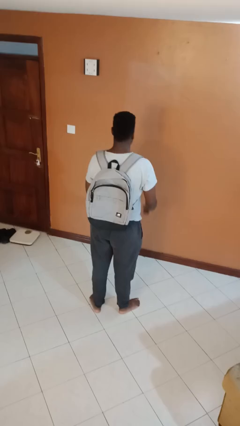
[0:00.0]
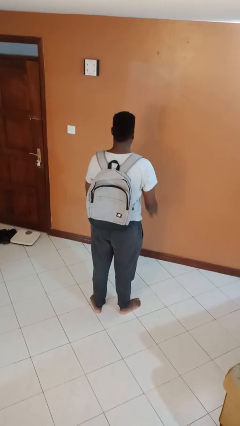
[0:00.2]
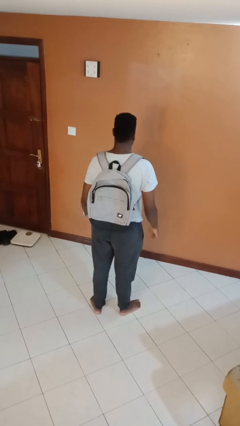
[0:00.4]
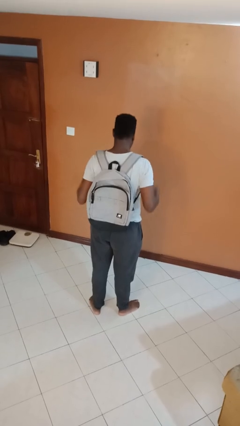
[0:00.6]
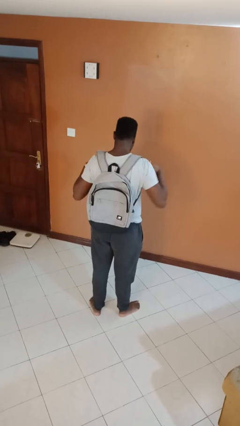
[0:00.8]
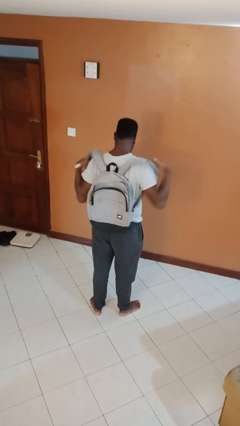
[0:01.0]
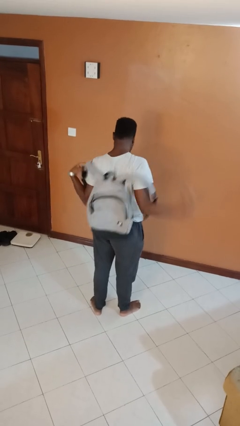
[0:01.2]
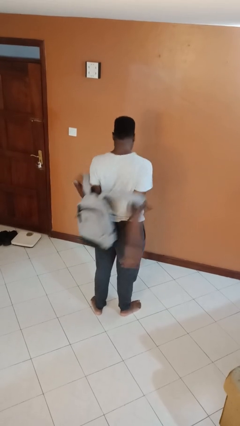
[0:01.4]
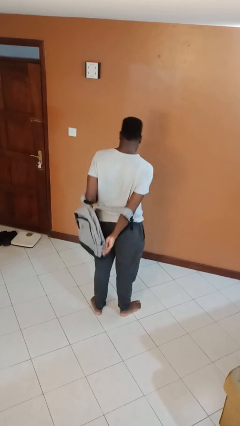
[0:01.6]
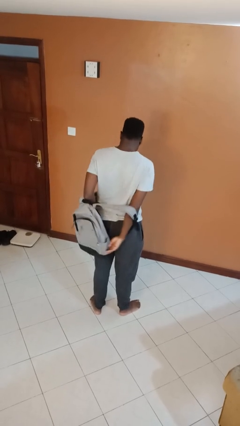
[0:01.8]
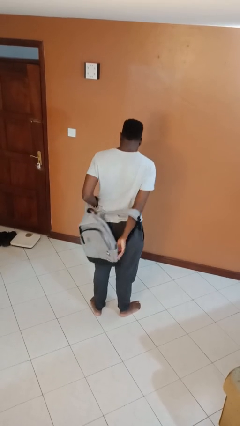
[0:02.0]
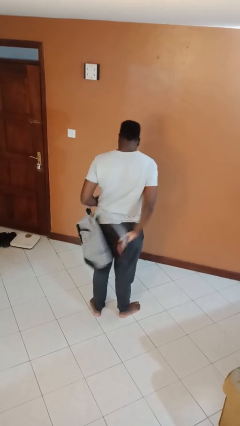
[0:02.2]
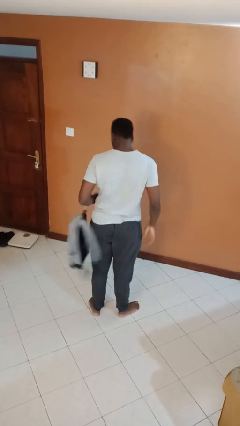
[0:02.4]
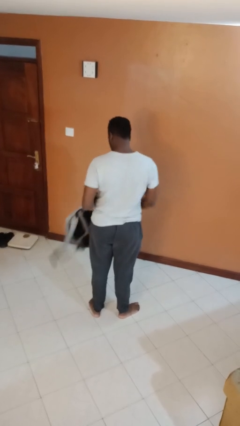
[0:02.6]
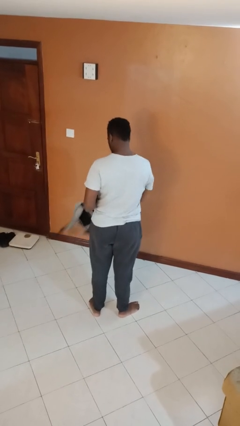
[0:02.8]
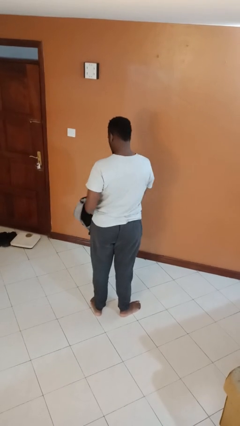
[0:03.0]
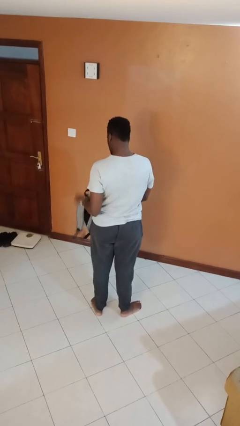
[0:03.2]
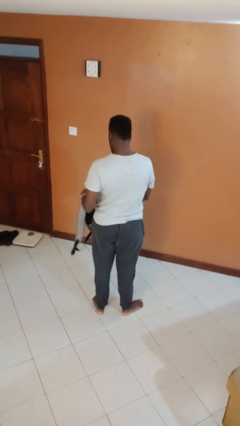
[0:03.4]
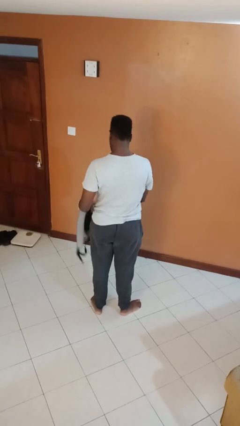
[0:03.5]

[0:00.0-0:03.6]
person takes off backpack

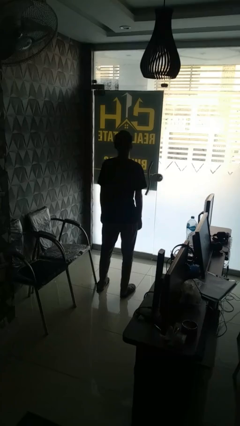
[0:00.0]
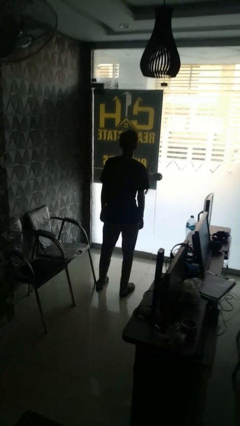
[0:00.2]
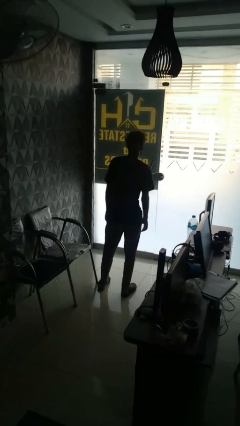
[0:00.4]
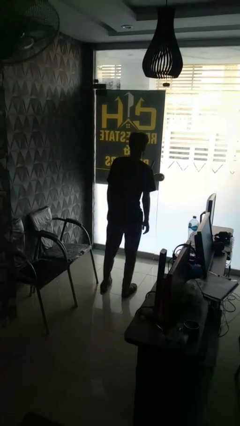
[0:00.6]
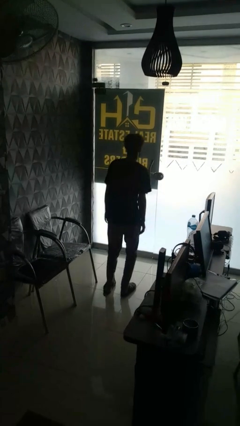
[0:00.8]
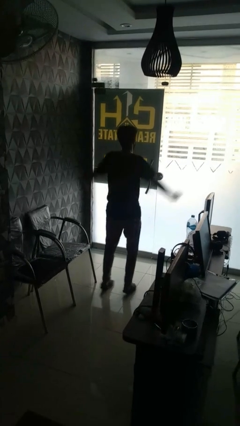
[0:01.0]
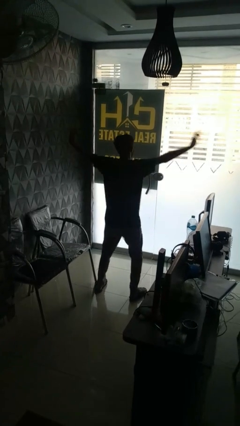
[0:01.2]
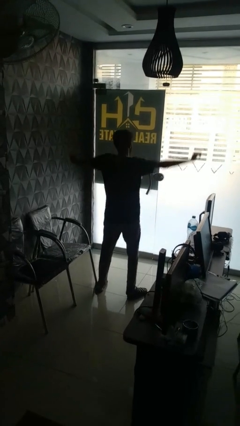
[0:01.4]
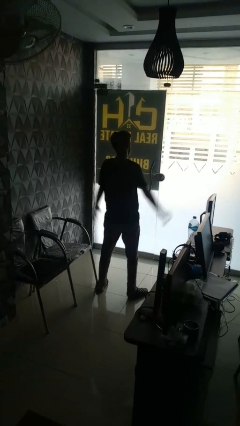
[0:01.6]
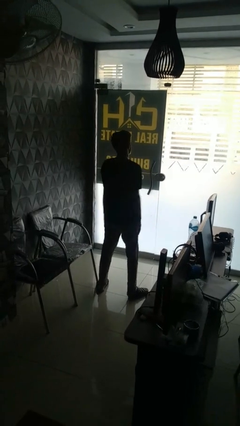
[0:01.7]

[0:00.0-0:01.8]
person exercises with jumping jacks

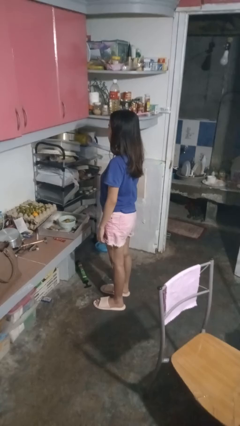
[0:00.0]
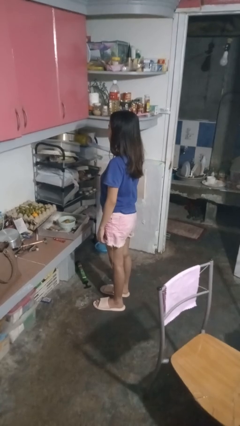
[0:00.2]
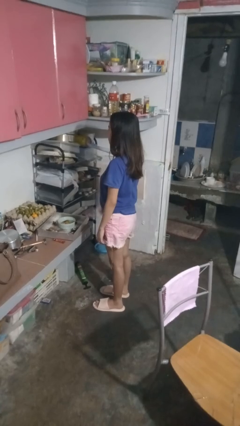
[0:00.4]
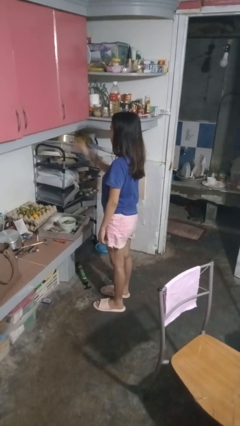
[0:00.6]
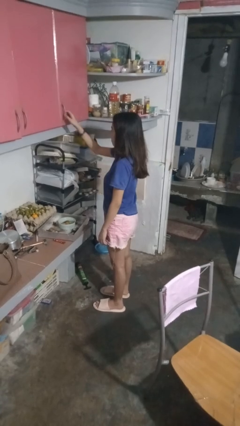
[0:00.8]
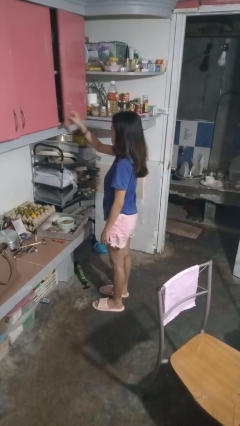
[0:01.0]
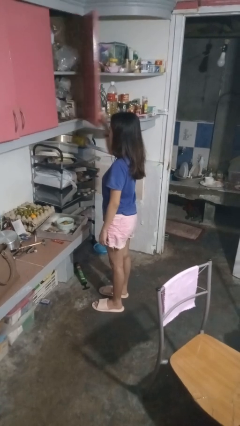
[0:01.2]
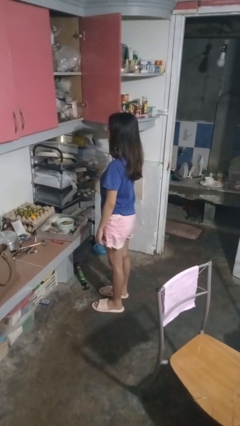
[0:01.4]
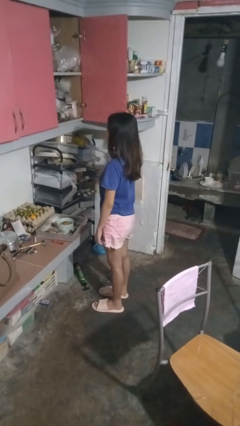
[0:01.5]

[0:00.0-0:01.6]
person opens cabinet

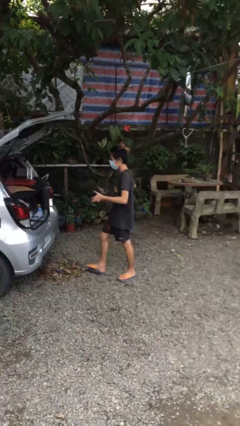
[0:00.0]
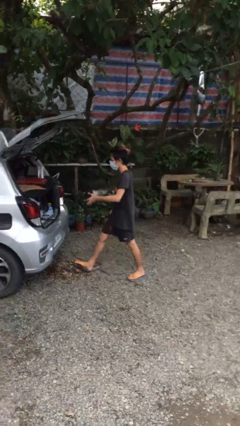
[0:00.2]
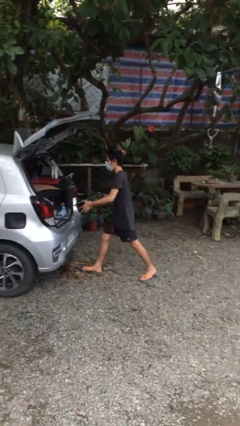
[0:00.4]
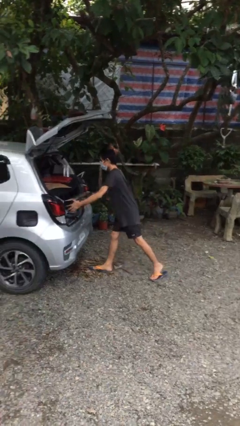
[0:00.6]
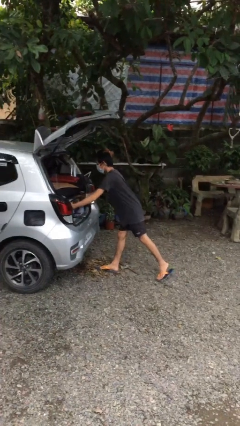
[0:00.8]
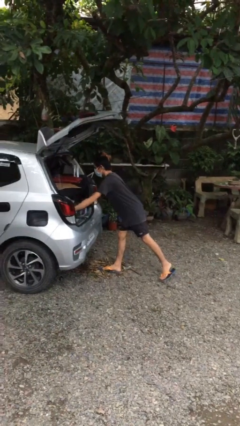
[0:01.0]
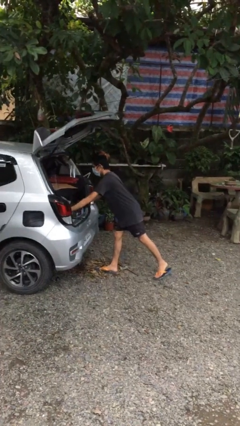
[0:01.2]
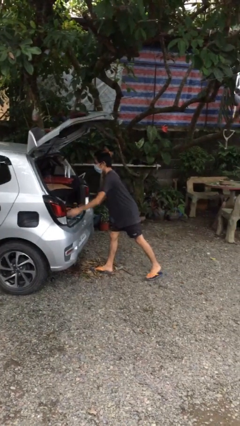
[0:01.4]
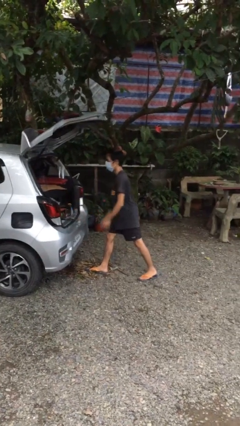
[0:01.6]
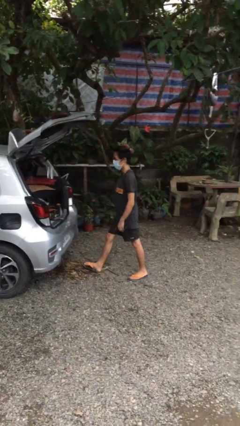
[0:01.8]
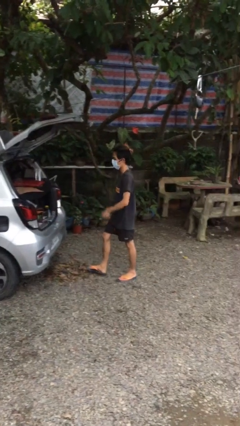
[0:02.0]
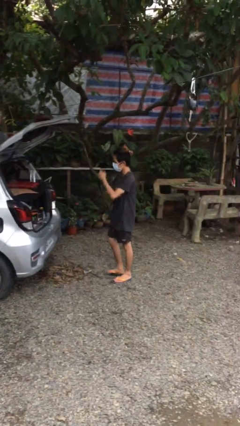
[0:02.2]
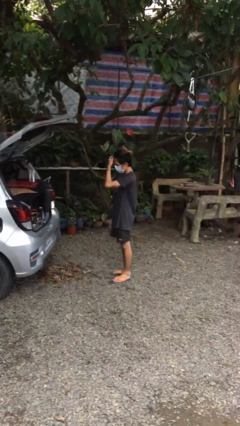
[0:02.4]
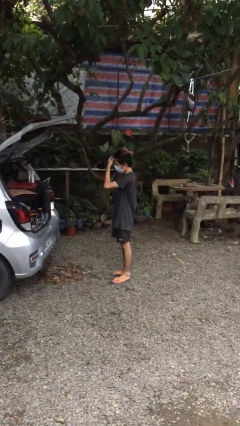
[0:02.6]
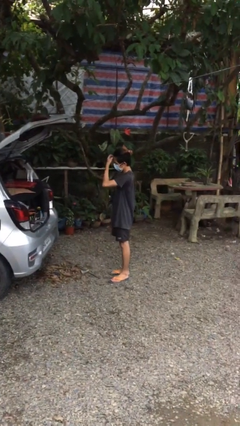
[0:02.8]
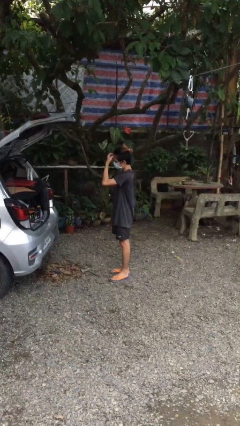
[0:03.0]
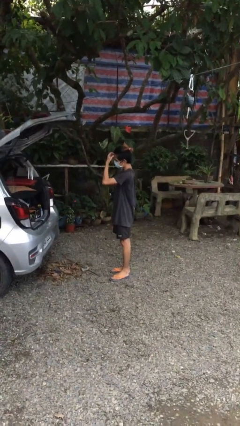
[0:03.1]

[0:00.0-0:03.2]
person loads car

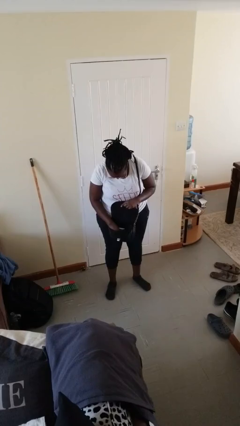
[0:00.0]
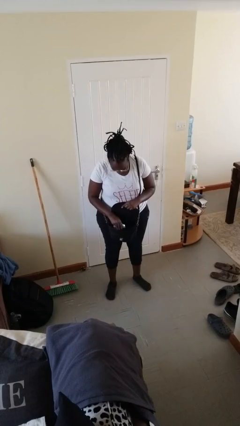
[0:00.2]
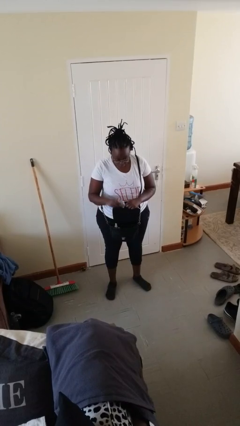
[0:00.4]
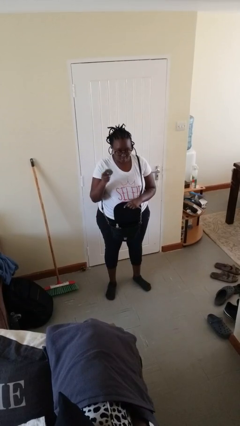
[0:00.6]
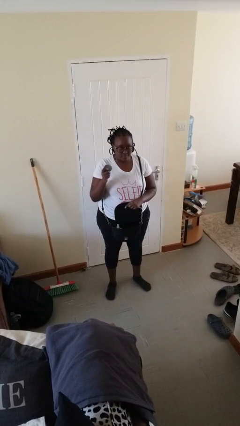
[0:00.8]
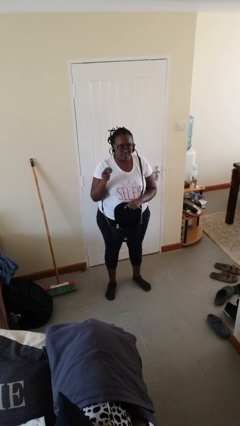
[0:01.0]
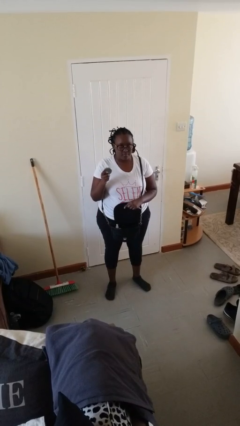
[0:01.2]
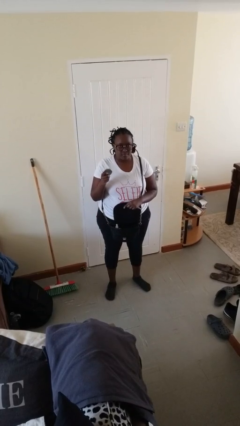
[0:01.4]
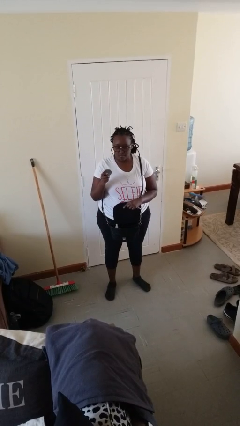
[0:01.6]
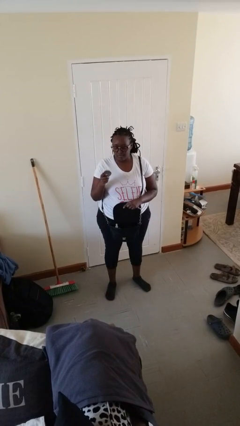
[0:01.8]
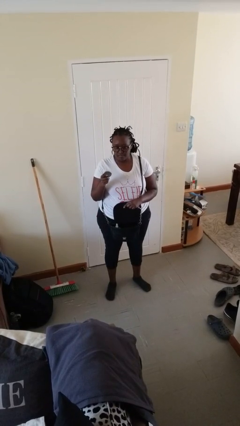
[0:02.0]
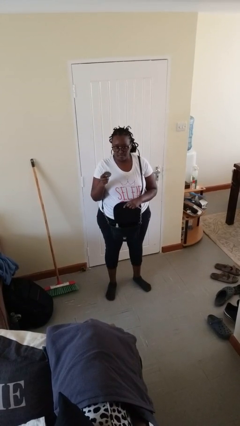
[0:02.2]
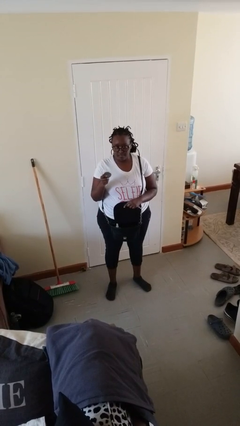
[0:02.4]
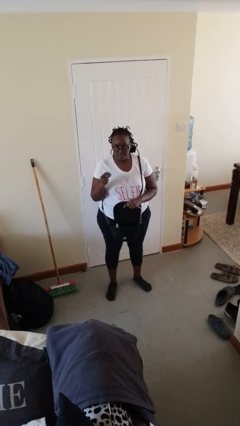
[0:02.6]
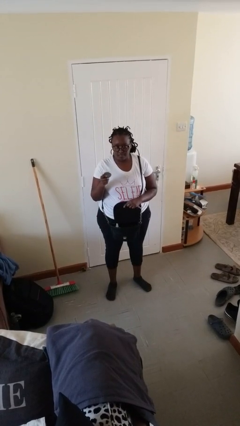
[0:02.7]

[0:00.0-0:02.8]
person takes object from purse

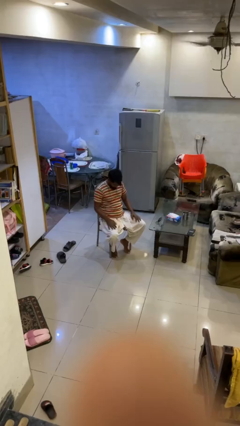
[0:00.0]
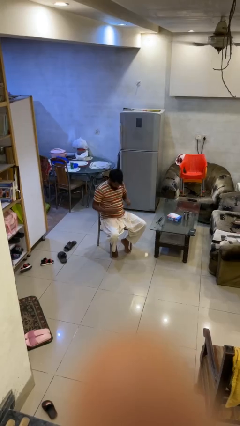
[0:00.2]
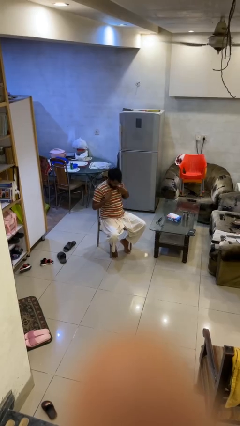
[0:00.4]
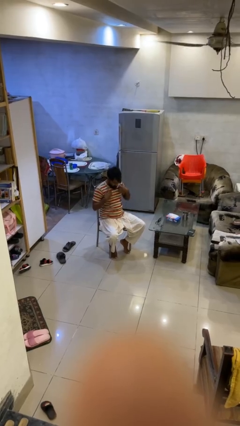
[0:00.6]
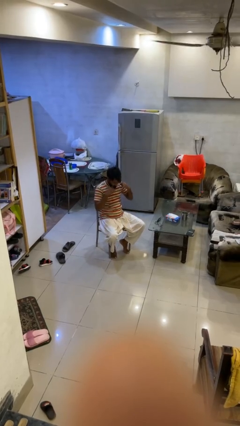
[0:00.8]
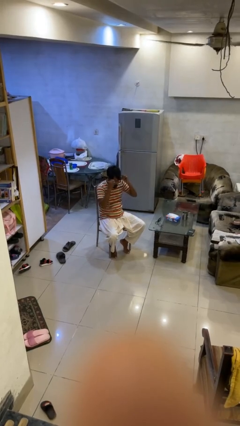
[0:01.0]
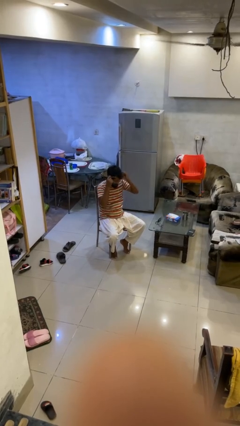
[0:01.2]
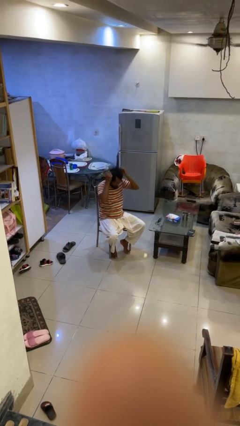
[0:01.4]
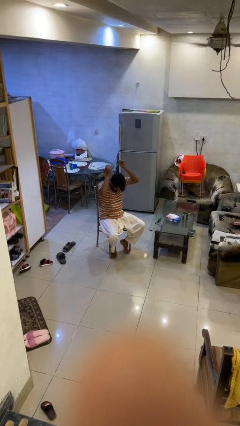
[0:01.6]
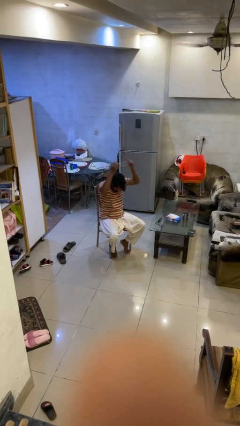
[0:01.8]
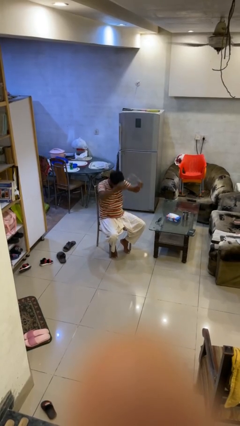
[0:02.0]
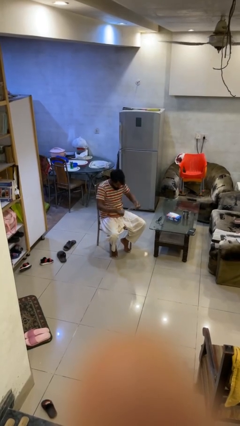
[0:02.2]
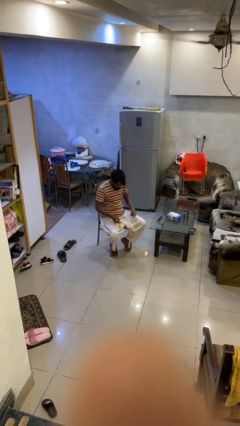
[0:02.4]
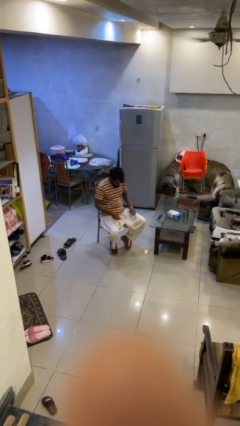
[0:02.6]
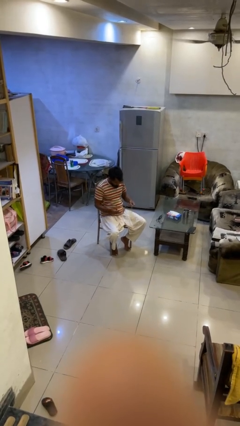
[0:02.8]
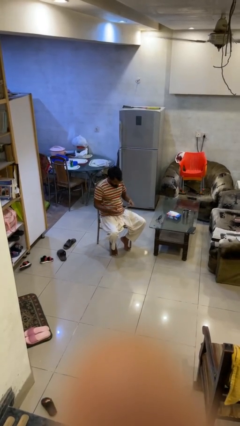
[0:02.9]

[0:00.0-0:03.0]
person takes off necklace

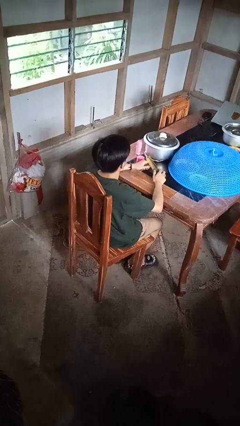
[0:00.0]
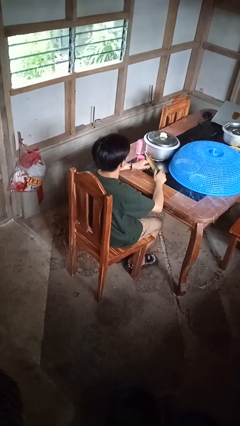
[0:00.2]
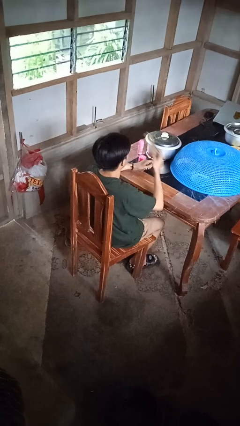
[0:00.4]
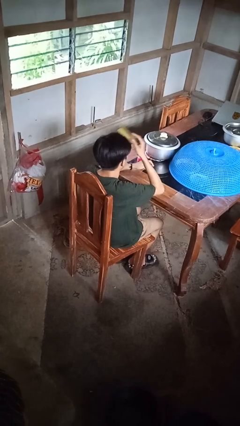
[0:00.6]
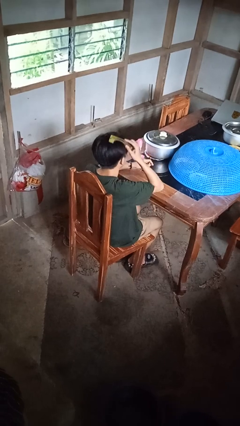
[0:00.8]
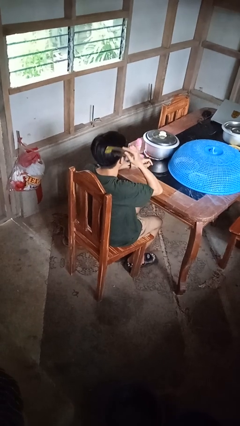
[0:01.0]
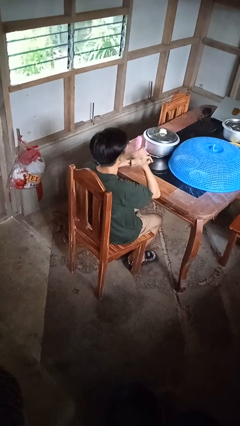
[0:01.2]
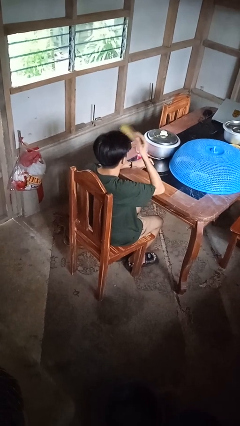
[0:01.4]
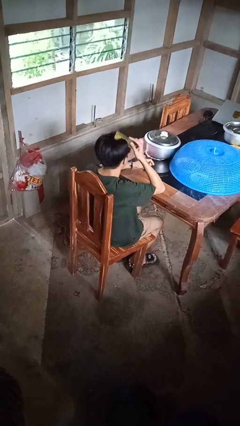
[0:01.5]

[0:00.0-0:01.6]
person brushes hair
